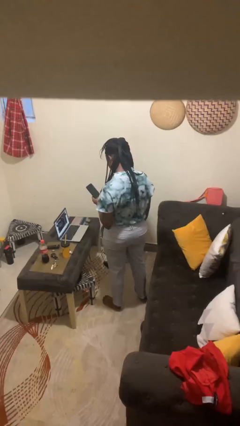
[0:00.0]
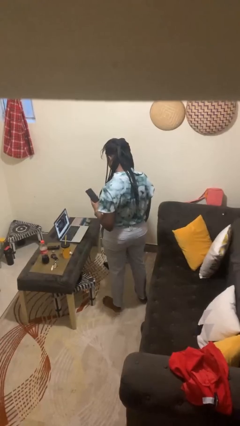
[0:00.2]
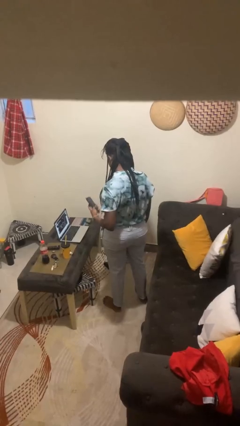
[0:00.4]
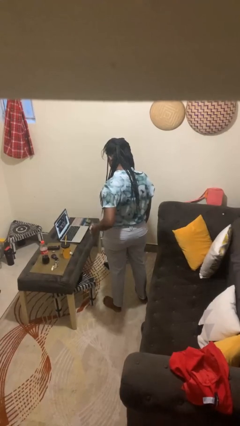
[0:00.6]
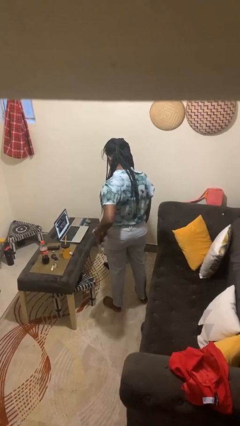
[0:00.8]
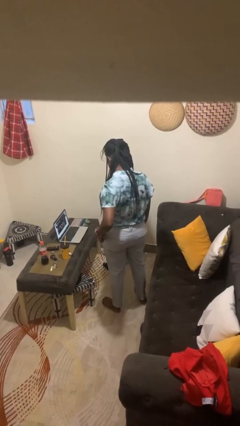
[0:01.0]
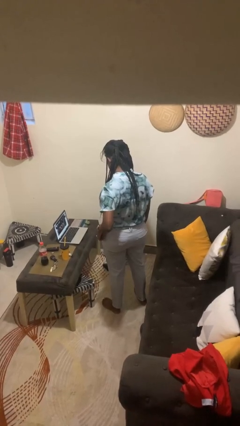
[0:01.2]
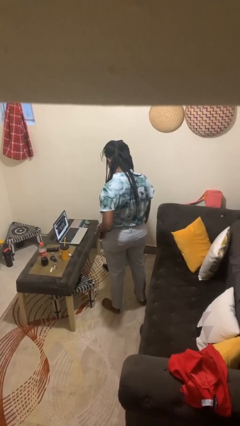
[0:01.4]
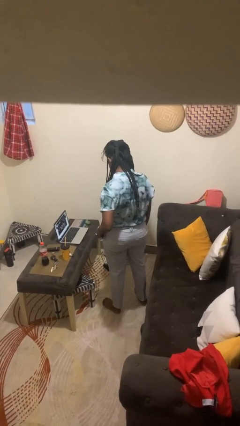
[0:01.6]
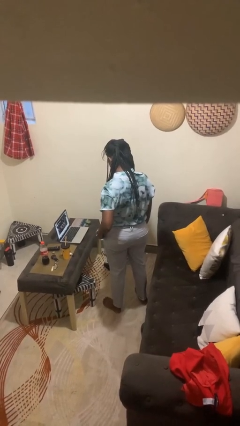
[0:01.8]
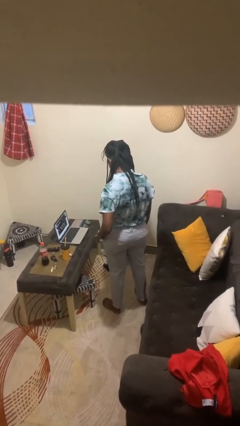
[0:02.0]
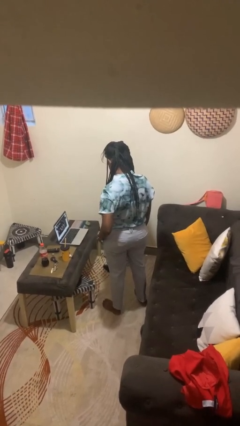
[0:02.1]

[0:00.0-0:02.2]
person puts phone into pocket

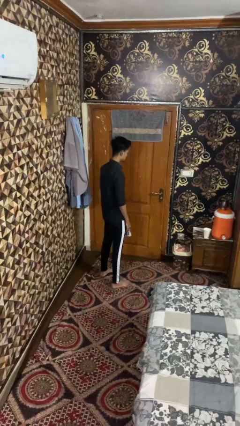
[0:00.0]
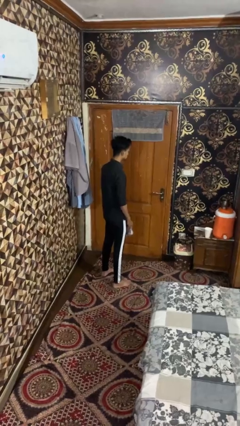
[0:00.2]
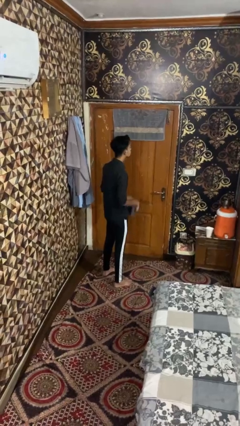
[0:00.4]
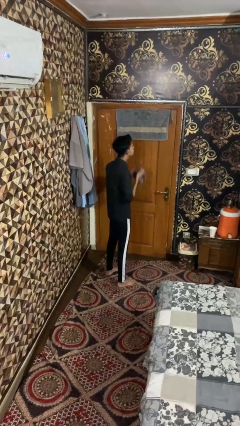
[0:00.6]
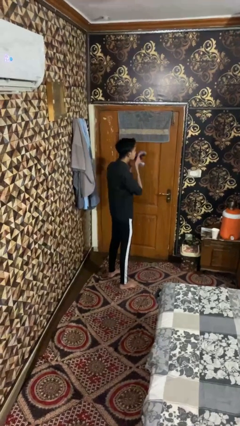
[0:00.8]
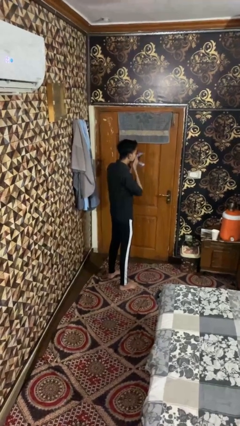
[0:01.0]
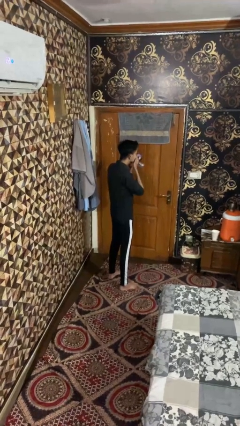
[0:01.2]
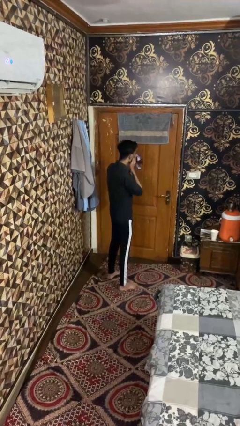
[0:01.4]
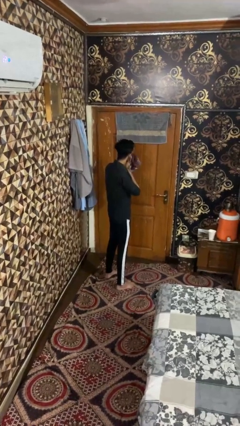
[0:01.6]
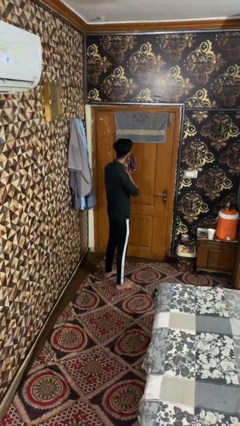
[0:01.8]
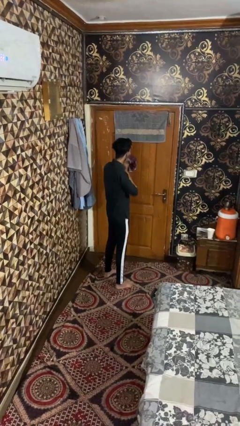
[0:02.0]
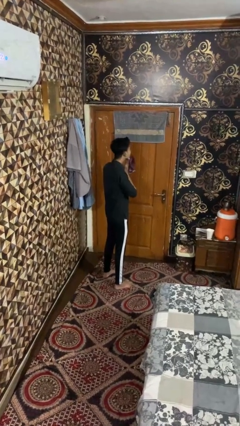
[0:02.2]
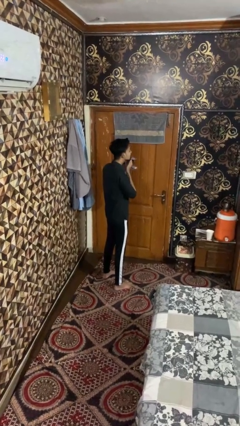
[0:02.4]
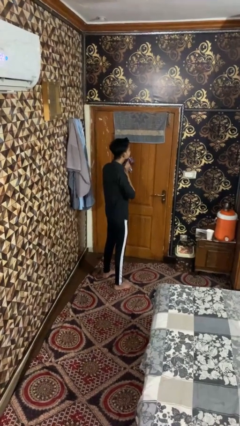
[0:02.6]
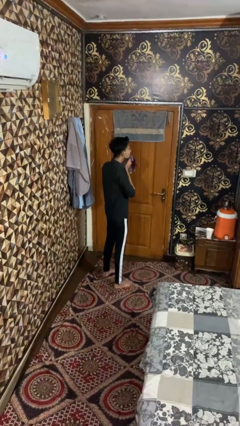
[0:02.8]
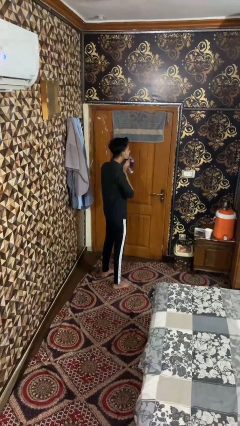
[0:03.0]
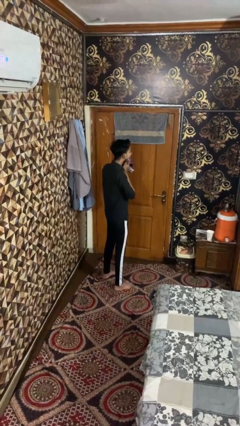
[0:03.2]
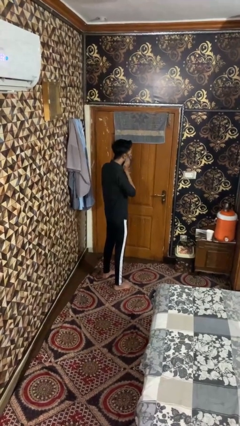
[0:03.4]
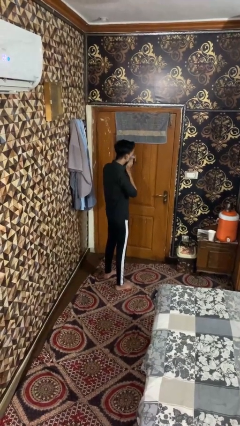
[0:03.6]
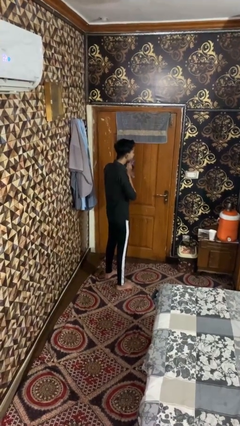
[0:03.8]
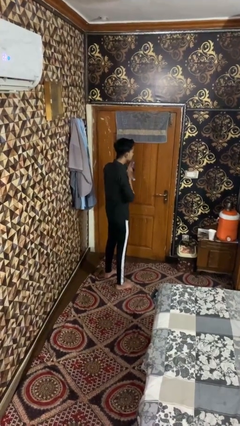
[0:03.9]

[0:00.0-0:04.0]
person wipes mouth with napkin

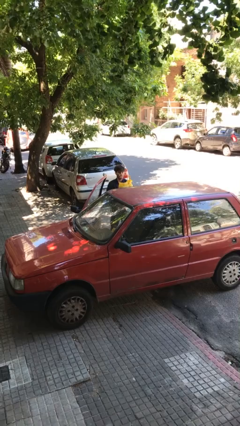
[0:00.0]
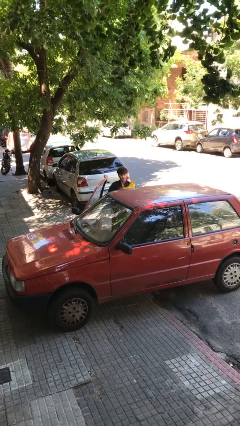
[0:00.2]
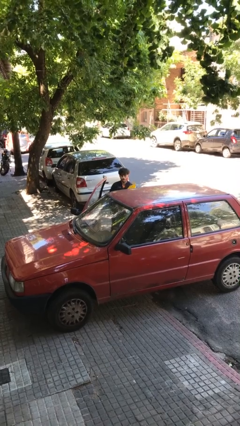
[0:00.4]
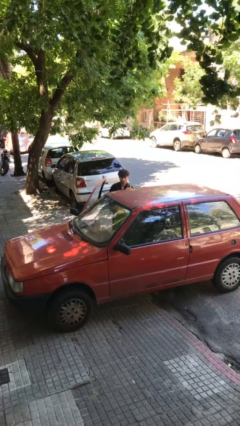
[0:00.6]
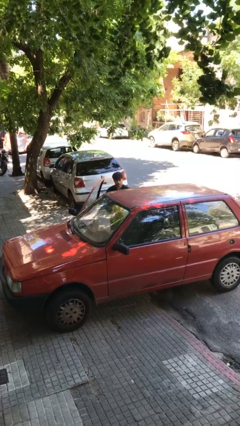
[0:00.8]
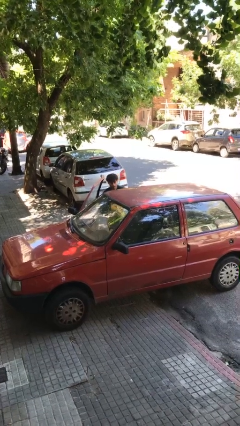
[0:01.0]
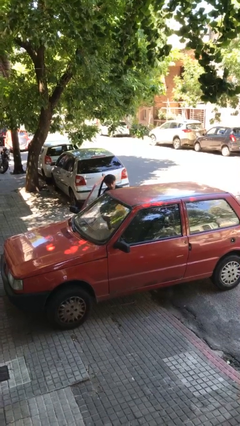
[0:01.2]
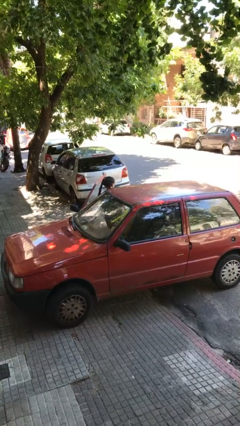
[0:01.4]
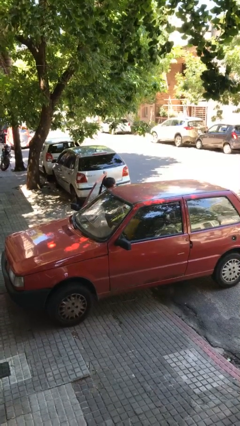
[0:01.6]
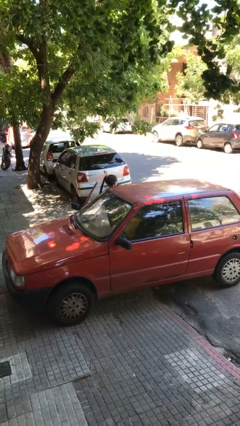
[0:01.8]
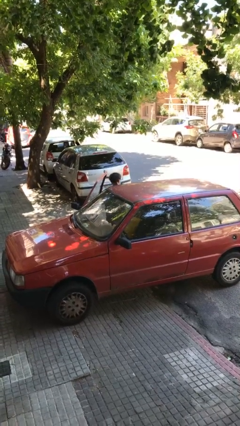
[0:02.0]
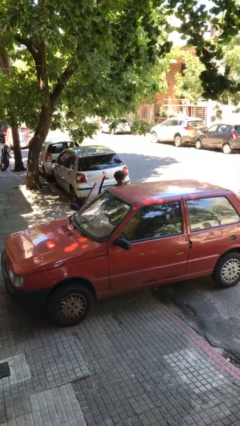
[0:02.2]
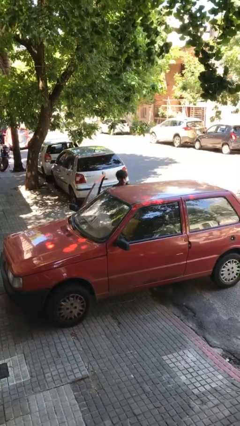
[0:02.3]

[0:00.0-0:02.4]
person loads car

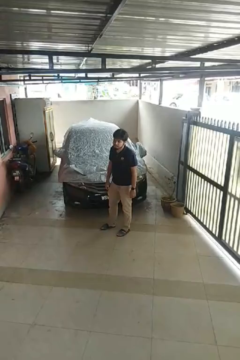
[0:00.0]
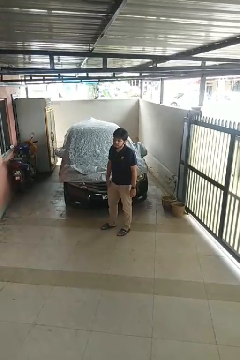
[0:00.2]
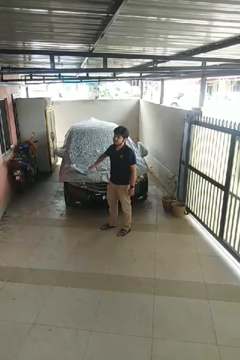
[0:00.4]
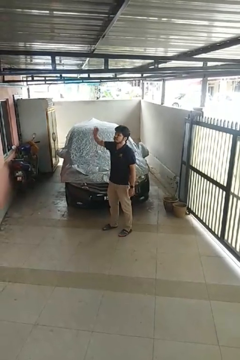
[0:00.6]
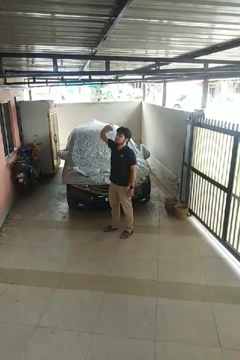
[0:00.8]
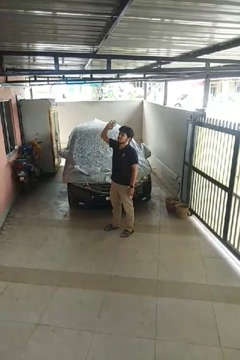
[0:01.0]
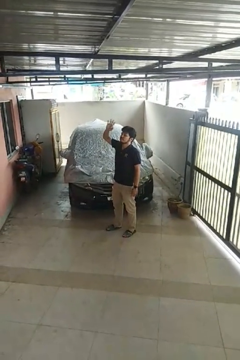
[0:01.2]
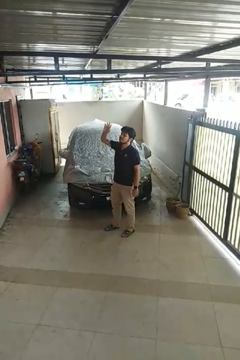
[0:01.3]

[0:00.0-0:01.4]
person waves at person

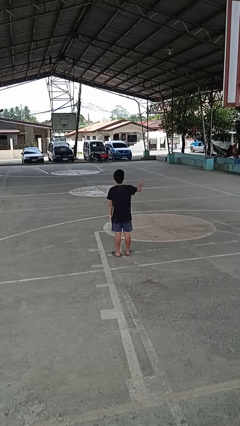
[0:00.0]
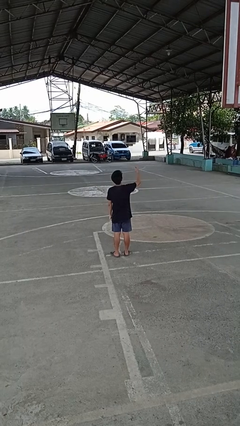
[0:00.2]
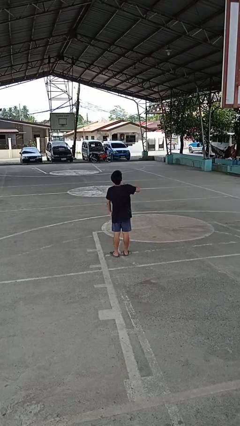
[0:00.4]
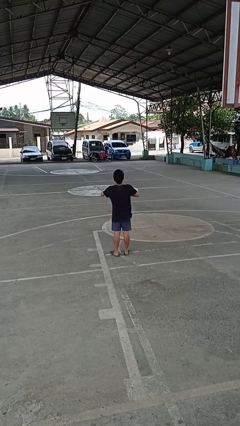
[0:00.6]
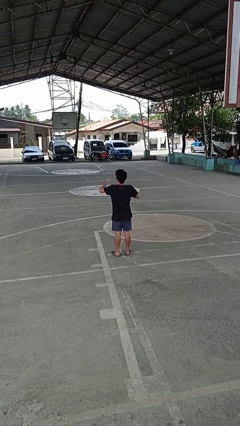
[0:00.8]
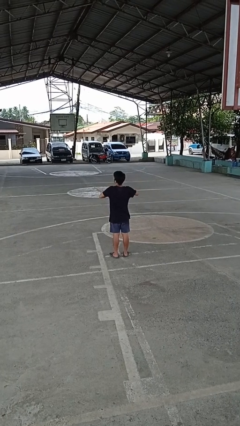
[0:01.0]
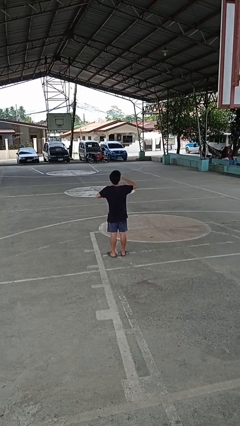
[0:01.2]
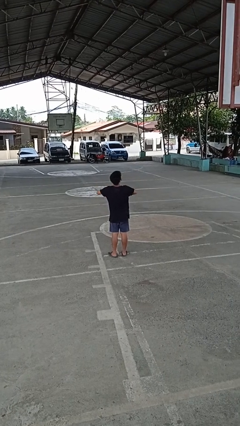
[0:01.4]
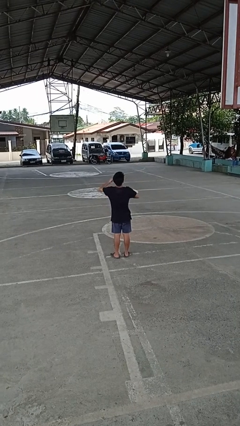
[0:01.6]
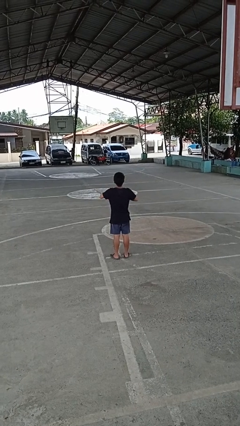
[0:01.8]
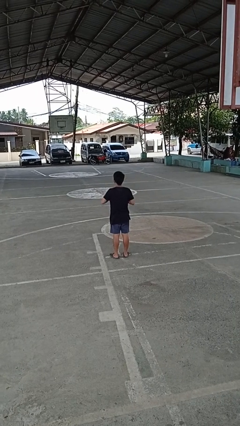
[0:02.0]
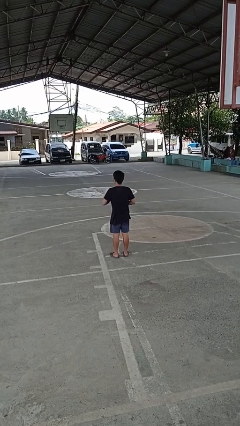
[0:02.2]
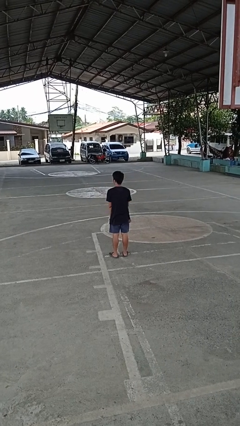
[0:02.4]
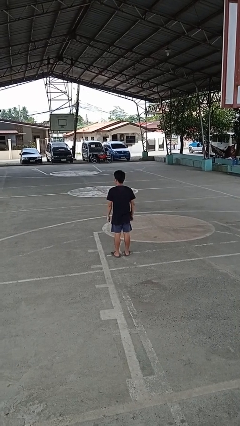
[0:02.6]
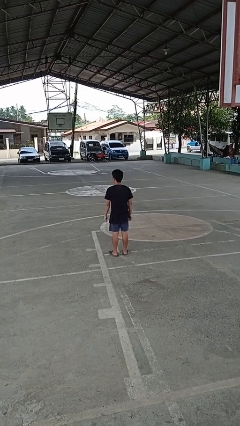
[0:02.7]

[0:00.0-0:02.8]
person drums on chest

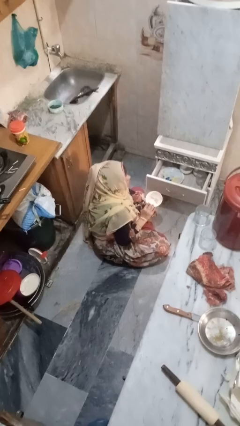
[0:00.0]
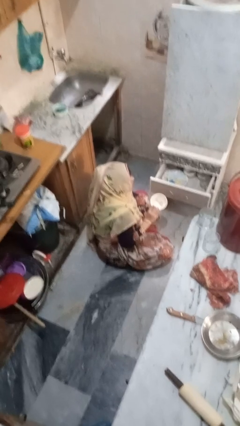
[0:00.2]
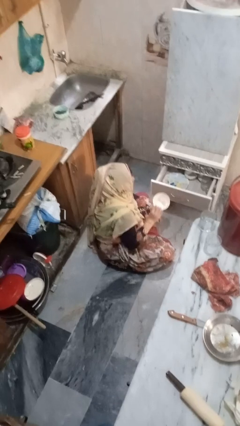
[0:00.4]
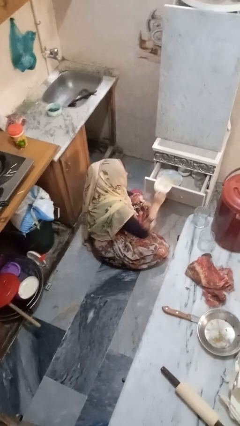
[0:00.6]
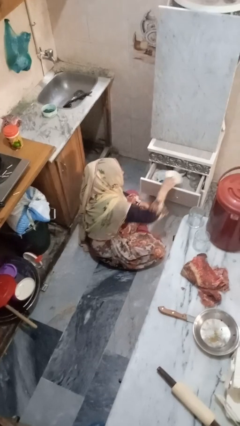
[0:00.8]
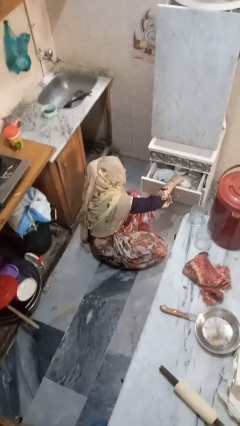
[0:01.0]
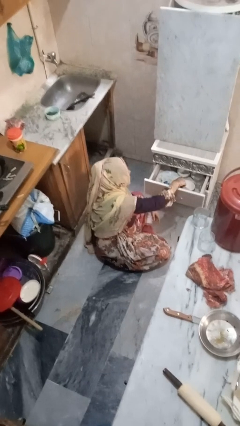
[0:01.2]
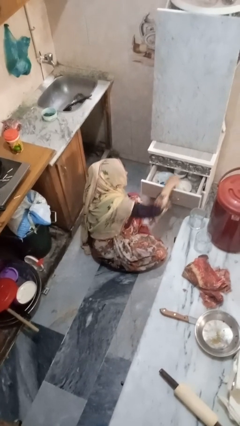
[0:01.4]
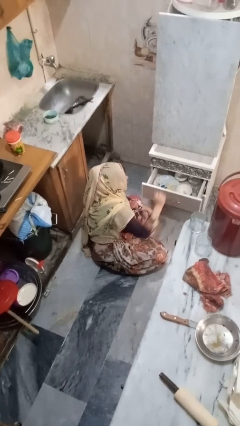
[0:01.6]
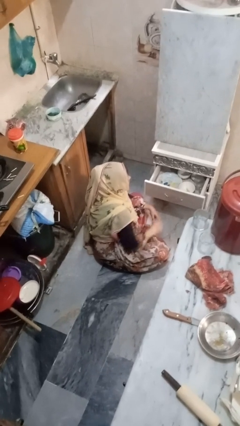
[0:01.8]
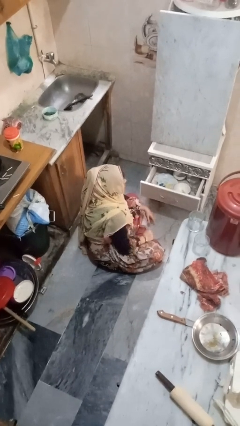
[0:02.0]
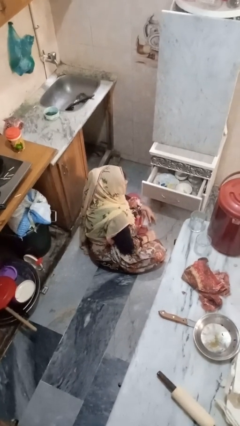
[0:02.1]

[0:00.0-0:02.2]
person puts object into kitchen drawer

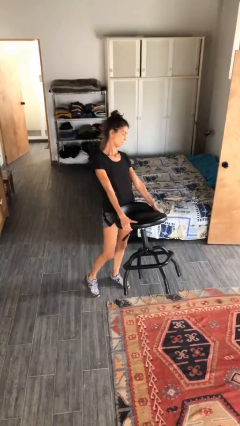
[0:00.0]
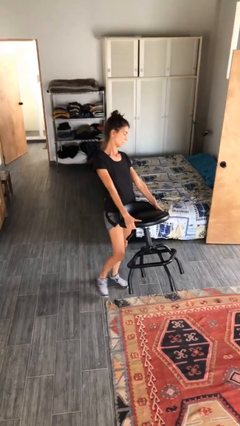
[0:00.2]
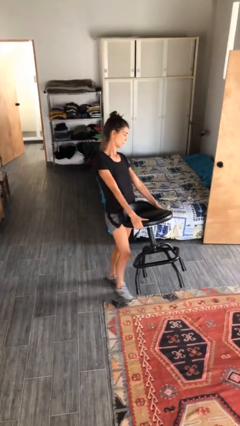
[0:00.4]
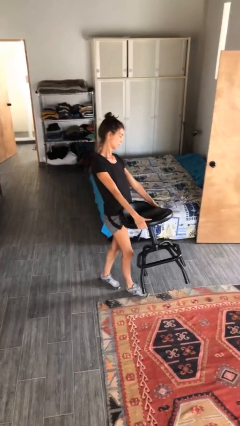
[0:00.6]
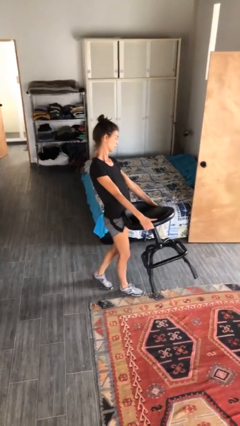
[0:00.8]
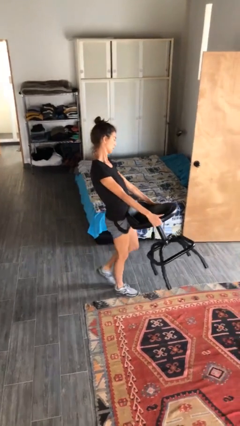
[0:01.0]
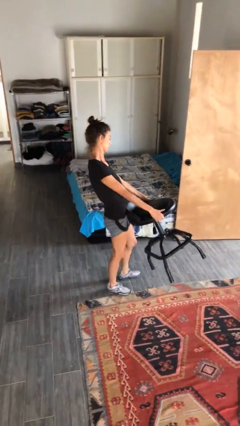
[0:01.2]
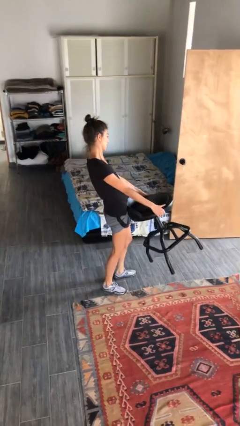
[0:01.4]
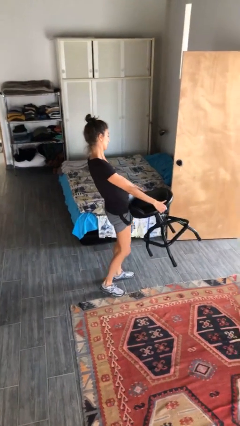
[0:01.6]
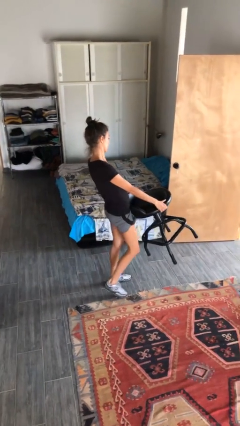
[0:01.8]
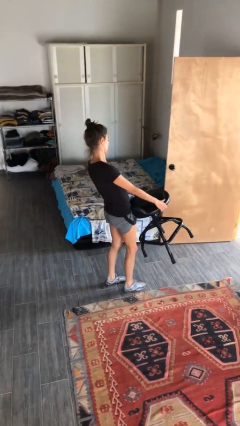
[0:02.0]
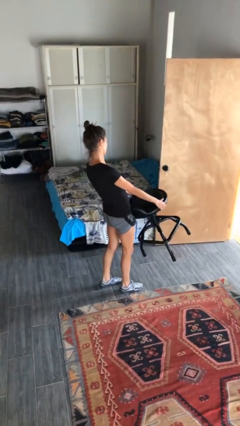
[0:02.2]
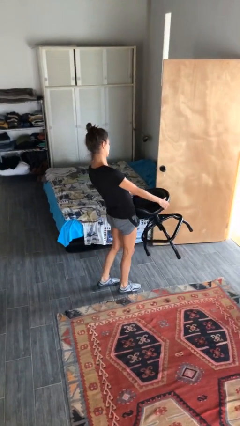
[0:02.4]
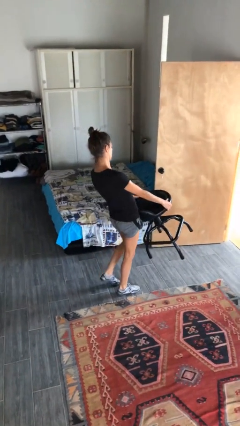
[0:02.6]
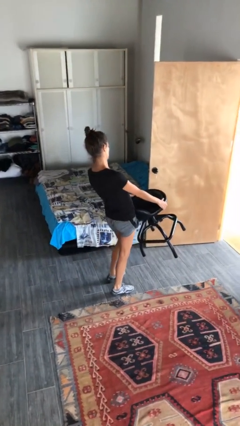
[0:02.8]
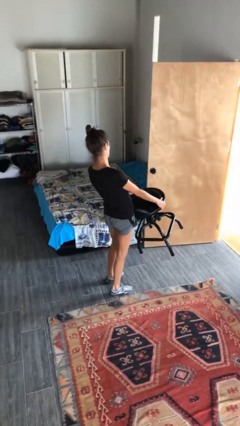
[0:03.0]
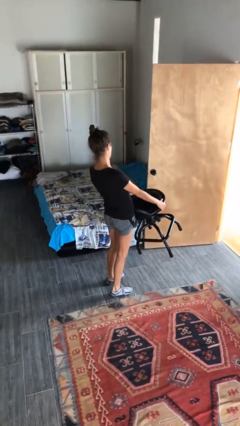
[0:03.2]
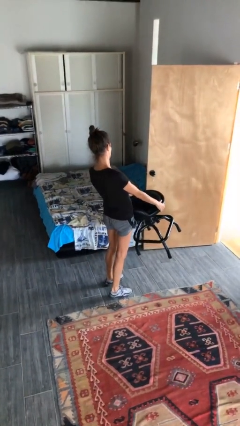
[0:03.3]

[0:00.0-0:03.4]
person carries furniture
